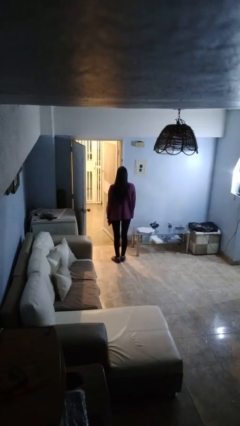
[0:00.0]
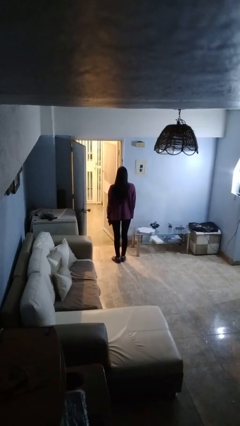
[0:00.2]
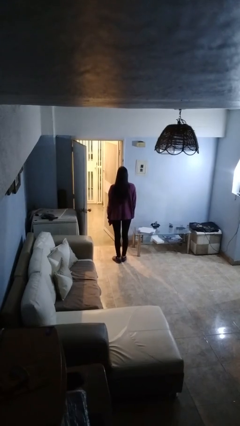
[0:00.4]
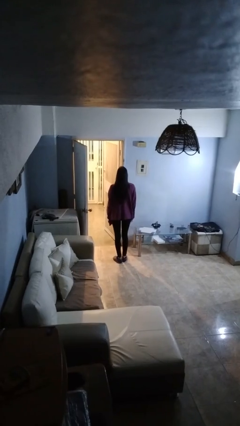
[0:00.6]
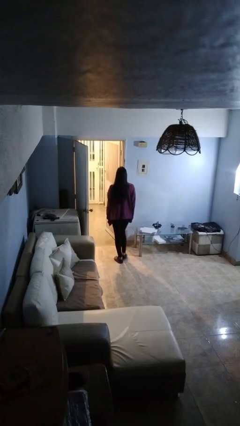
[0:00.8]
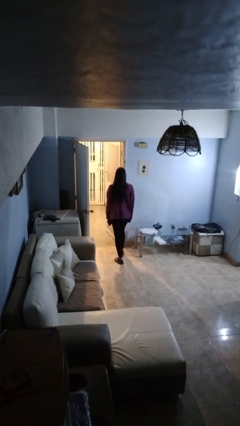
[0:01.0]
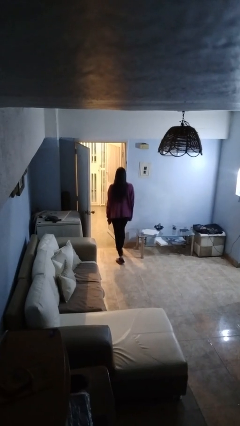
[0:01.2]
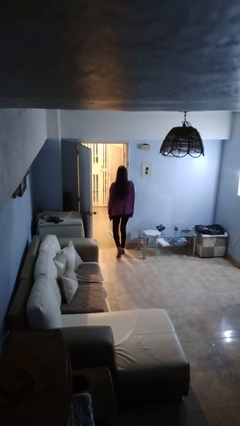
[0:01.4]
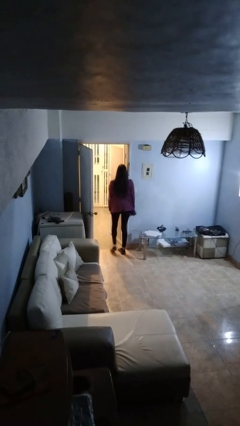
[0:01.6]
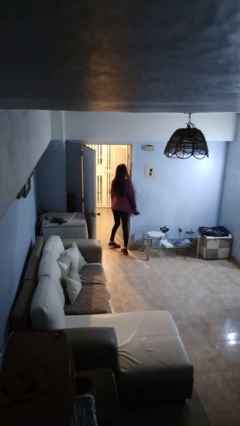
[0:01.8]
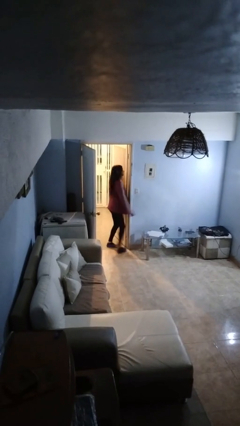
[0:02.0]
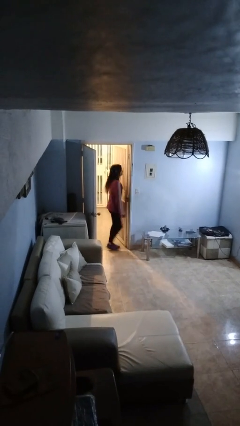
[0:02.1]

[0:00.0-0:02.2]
person bumps into wall

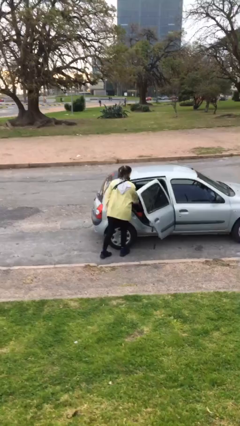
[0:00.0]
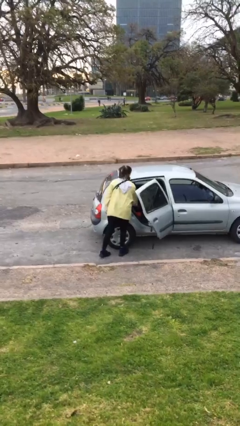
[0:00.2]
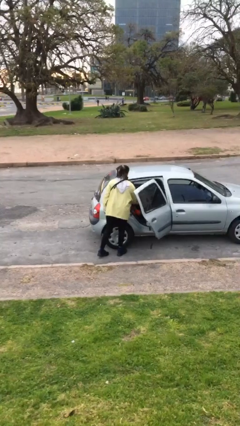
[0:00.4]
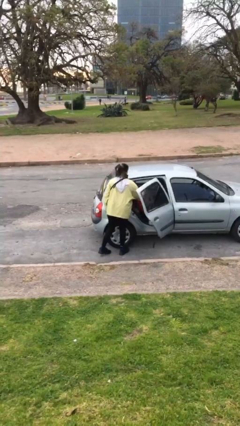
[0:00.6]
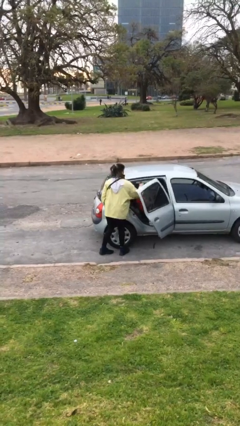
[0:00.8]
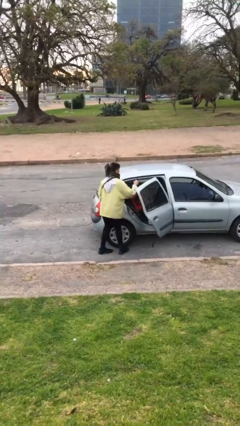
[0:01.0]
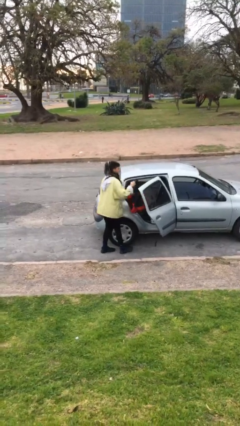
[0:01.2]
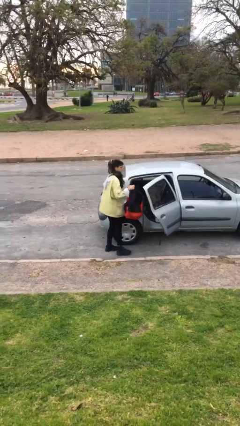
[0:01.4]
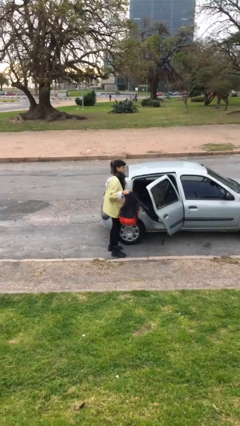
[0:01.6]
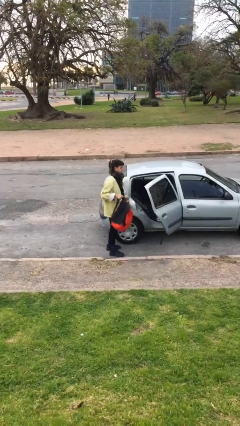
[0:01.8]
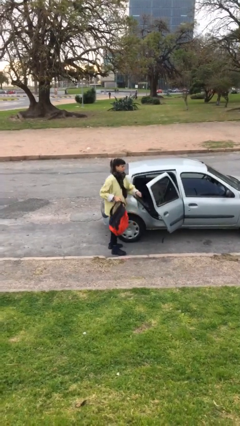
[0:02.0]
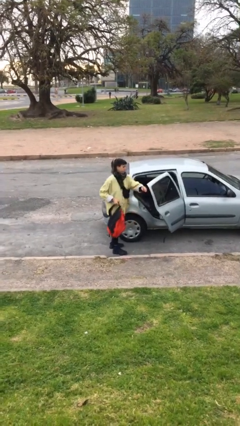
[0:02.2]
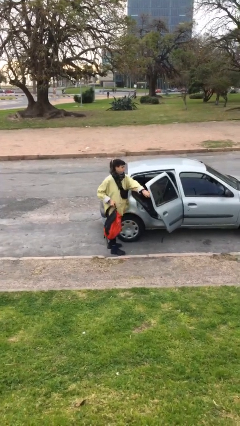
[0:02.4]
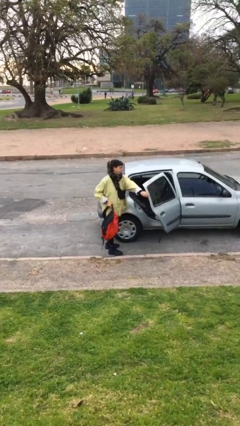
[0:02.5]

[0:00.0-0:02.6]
person unloads car

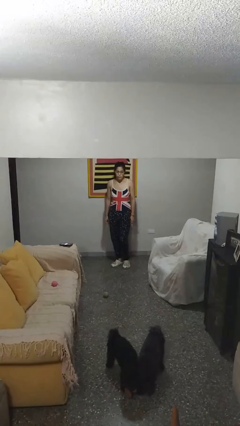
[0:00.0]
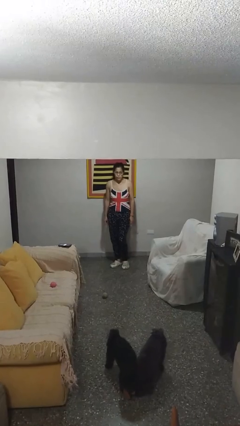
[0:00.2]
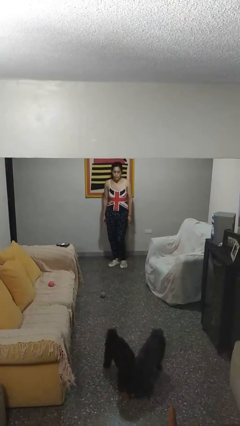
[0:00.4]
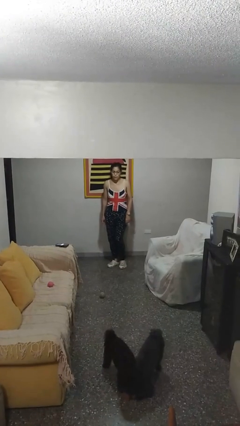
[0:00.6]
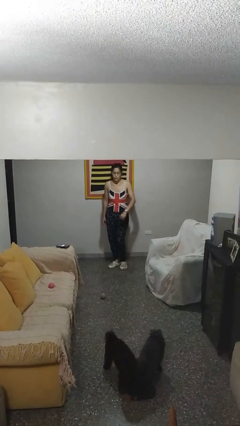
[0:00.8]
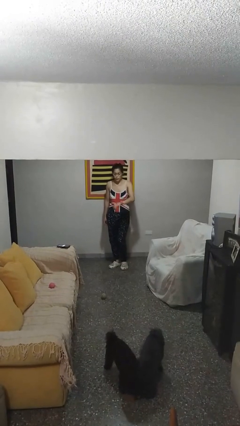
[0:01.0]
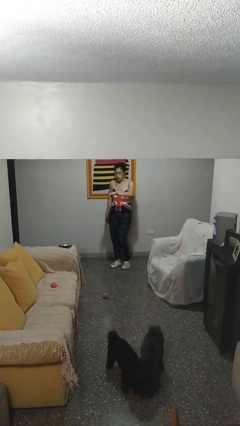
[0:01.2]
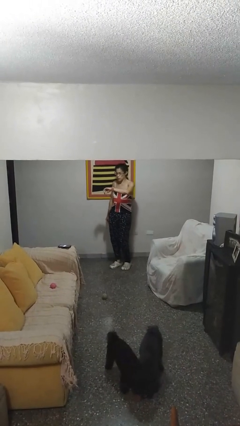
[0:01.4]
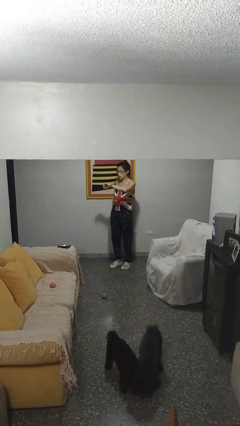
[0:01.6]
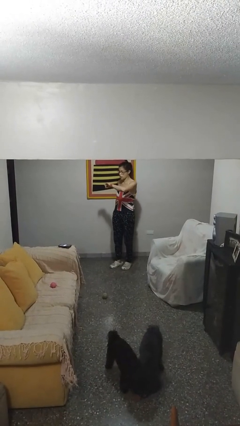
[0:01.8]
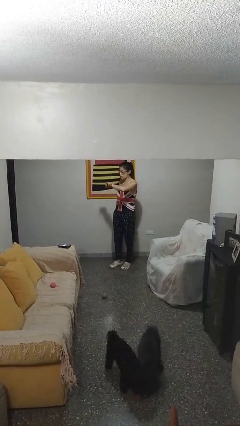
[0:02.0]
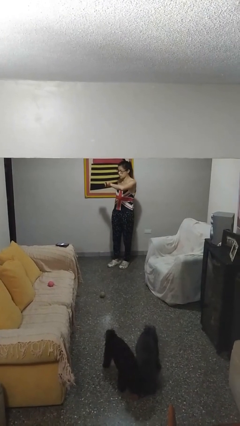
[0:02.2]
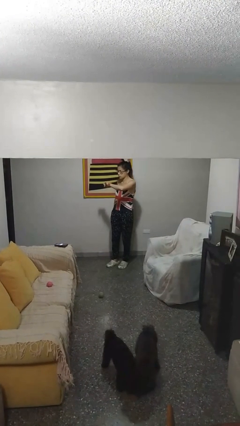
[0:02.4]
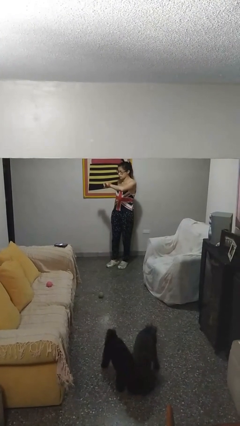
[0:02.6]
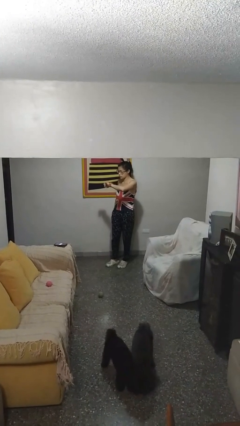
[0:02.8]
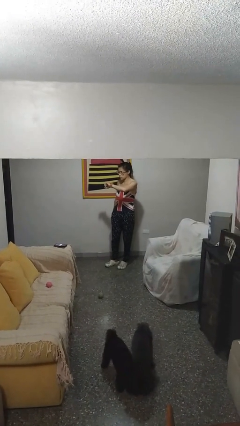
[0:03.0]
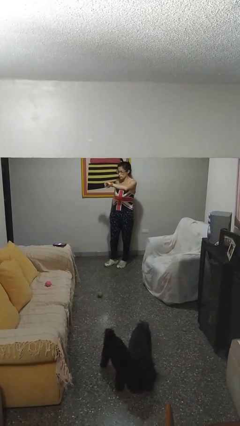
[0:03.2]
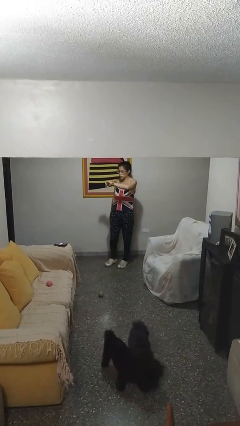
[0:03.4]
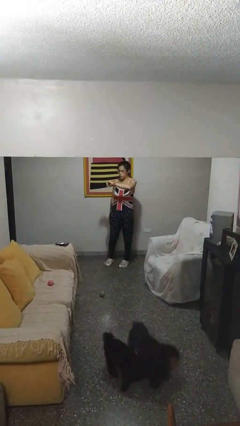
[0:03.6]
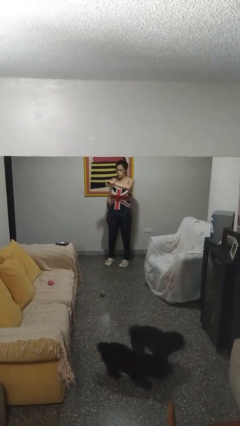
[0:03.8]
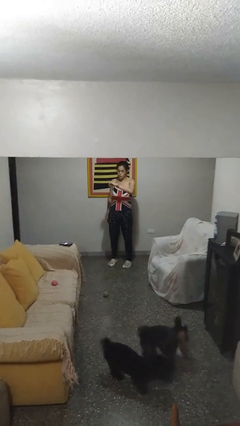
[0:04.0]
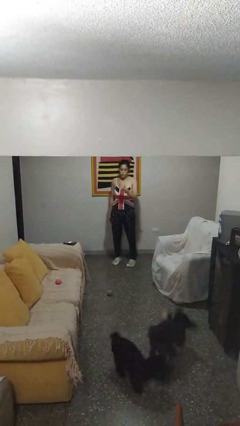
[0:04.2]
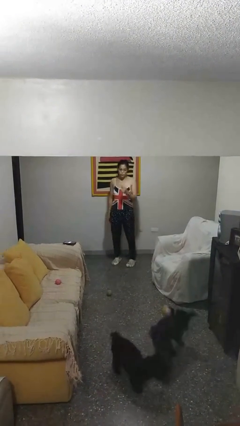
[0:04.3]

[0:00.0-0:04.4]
person looks at wristwatch

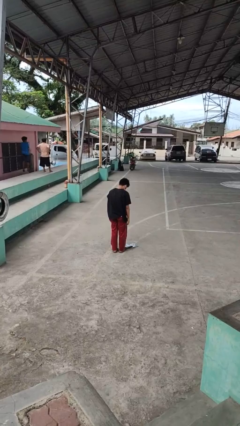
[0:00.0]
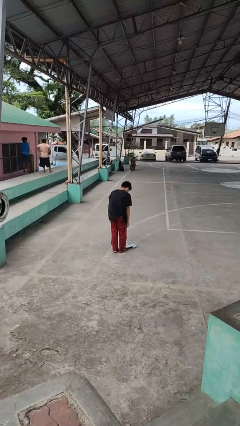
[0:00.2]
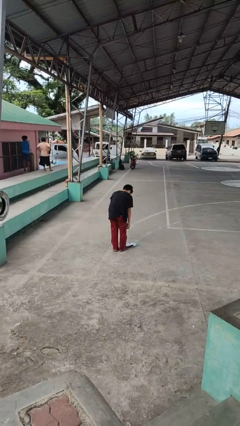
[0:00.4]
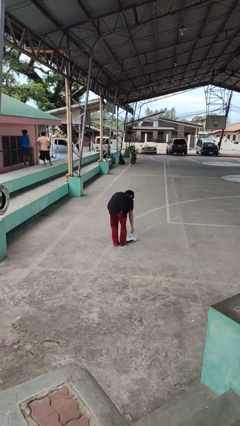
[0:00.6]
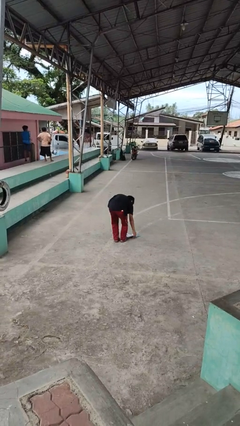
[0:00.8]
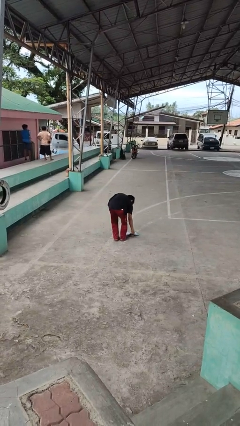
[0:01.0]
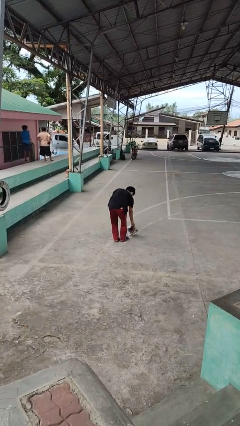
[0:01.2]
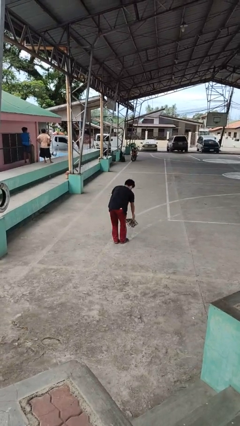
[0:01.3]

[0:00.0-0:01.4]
person picks up object from floor

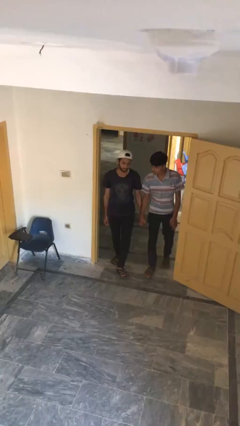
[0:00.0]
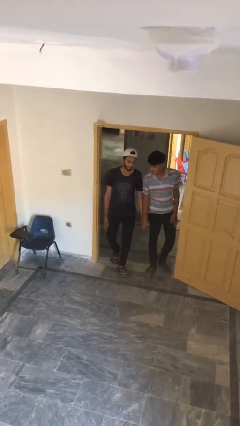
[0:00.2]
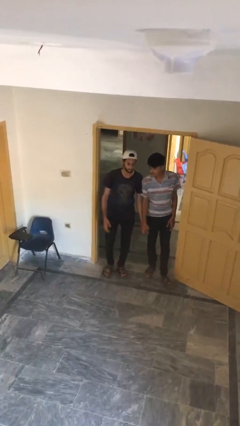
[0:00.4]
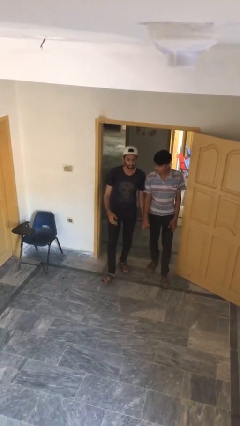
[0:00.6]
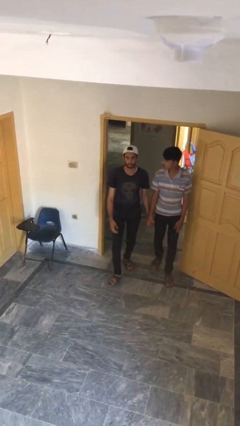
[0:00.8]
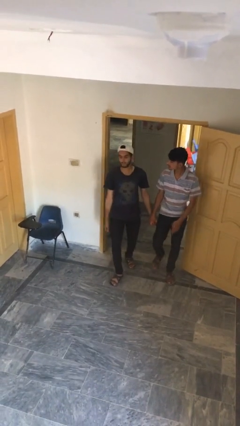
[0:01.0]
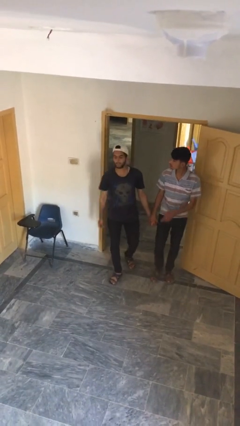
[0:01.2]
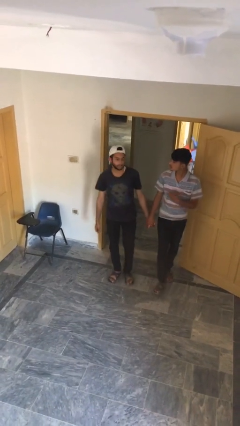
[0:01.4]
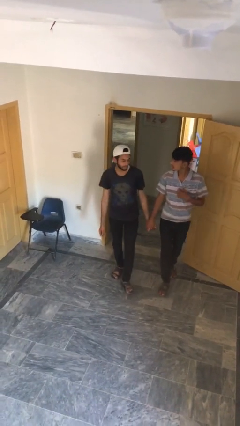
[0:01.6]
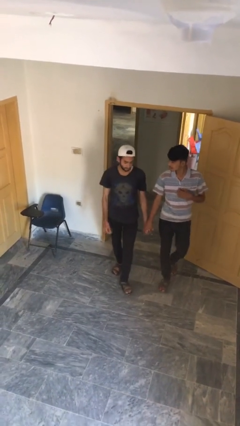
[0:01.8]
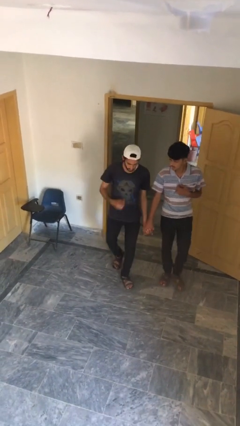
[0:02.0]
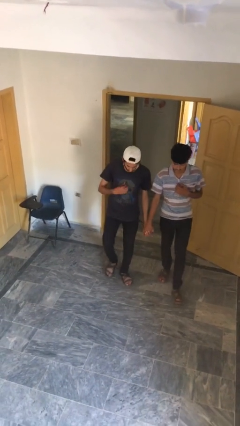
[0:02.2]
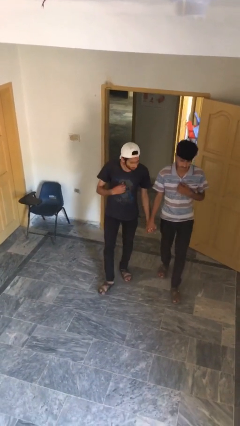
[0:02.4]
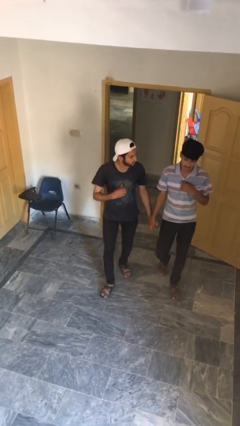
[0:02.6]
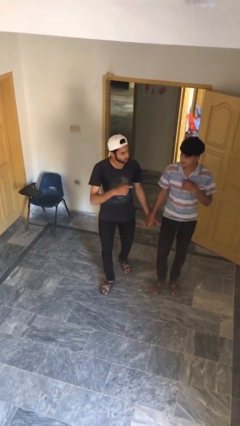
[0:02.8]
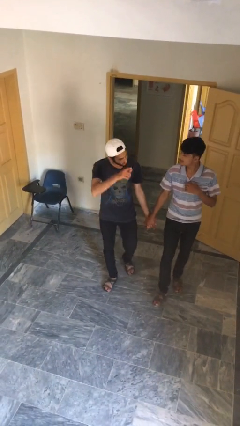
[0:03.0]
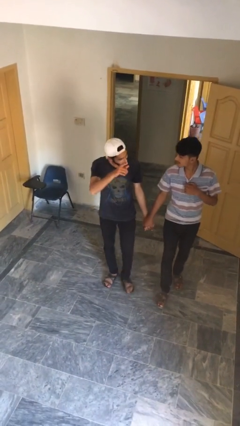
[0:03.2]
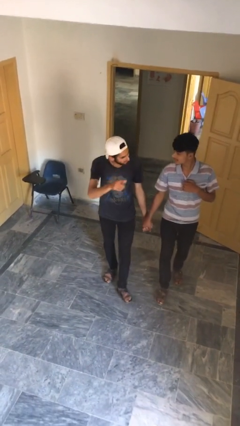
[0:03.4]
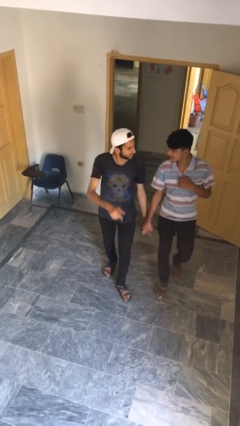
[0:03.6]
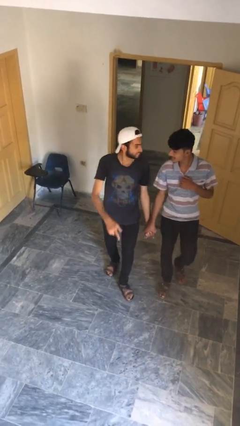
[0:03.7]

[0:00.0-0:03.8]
person holds hand

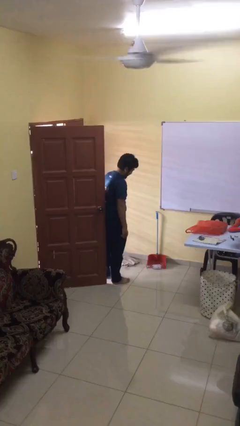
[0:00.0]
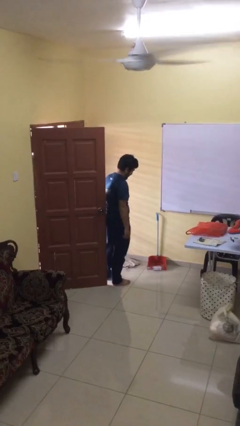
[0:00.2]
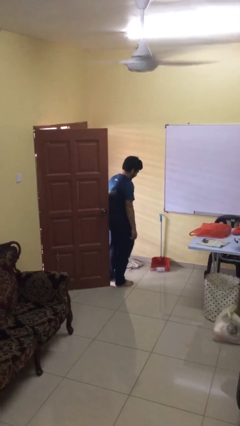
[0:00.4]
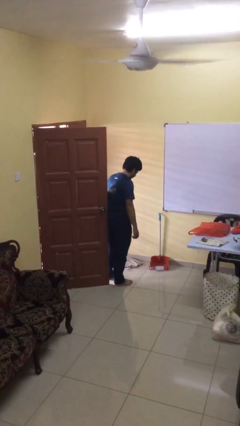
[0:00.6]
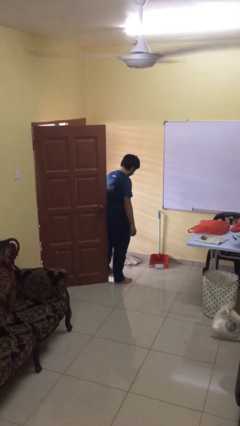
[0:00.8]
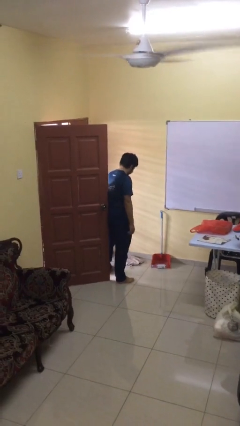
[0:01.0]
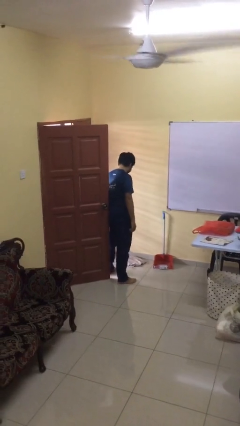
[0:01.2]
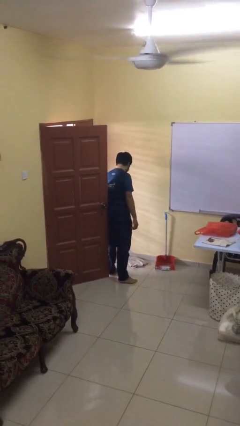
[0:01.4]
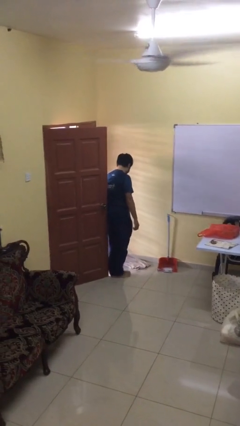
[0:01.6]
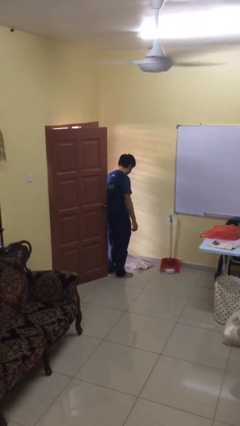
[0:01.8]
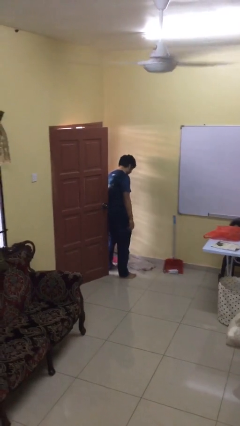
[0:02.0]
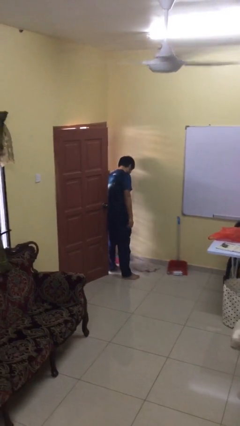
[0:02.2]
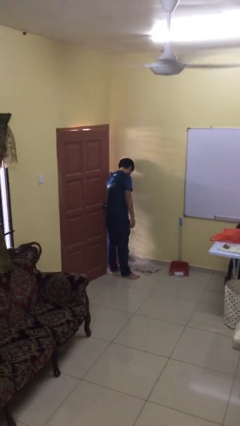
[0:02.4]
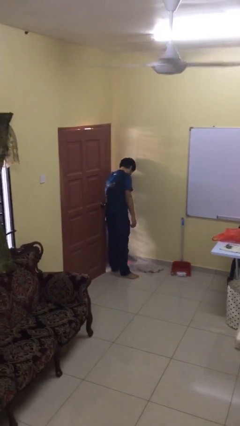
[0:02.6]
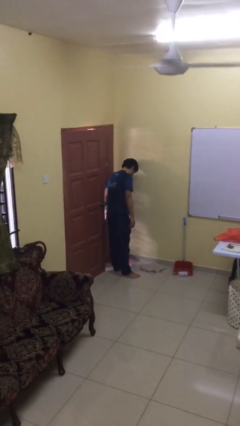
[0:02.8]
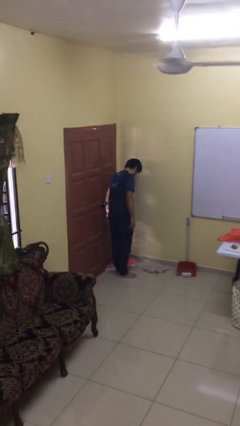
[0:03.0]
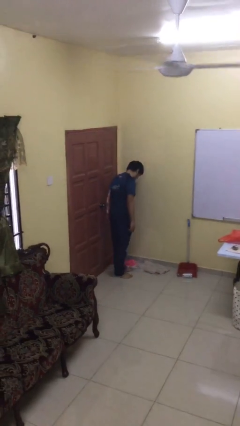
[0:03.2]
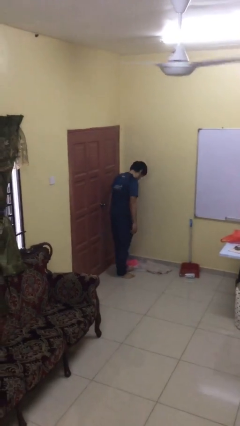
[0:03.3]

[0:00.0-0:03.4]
person closes door with hip

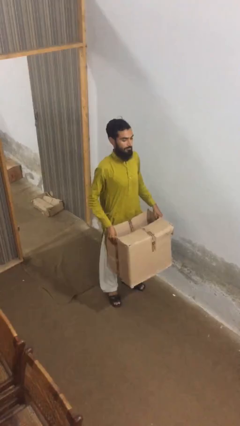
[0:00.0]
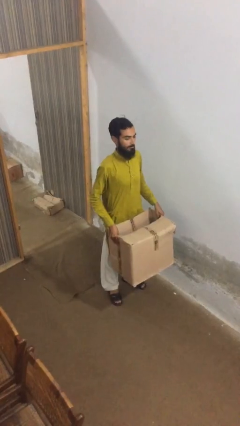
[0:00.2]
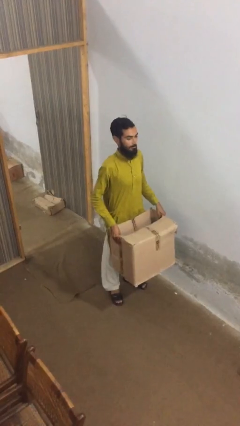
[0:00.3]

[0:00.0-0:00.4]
person puts down object on floor
